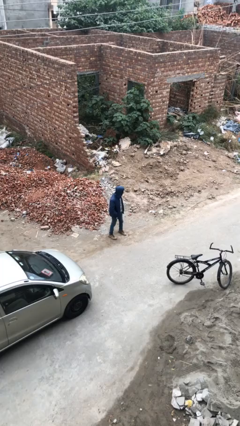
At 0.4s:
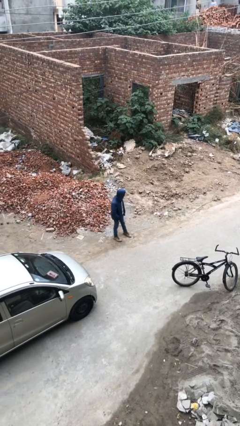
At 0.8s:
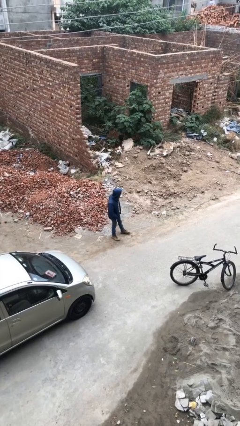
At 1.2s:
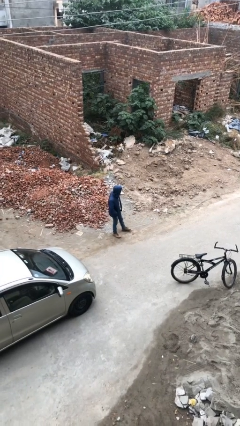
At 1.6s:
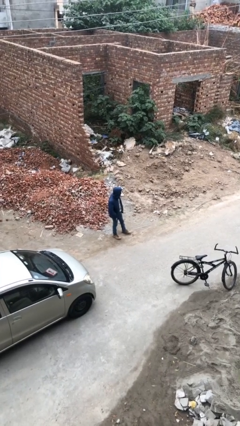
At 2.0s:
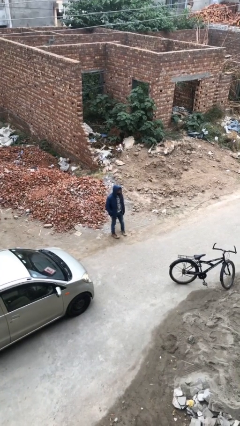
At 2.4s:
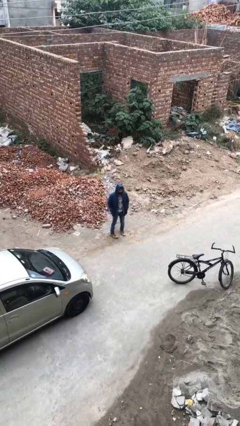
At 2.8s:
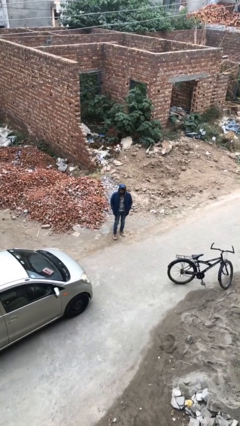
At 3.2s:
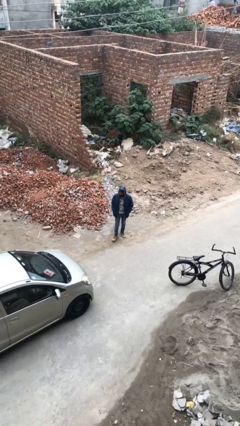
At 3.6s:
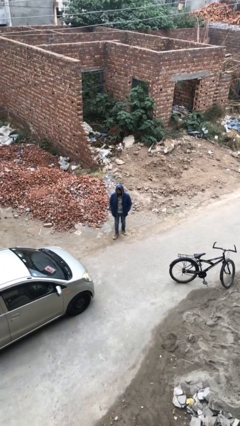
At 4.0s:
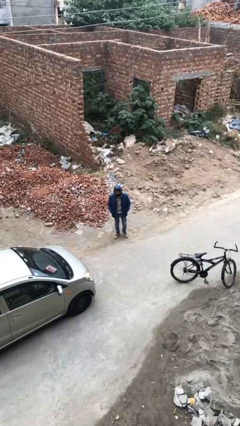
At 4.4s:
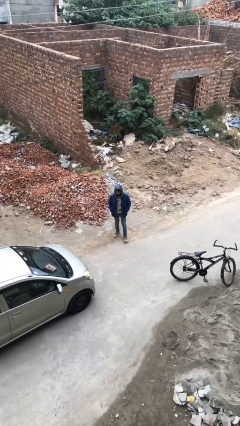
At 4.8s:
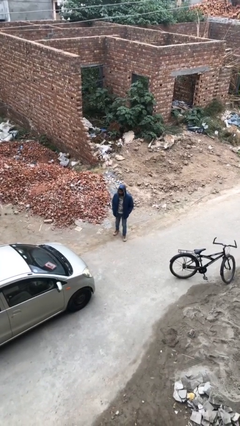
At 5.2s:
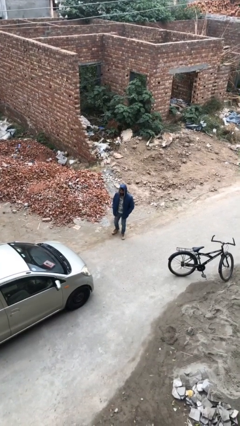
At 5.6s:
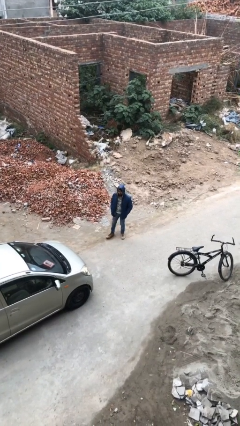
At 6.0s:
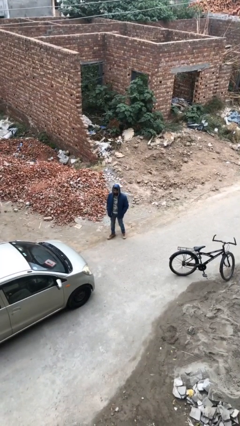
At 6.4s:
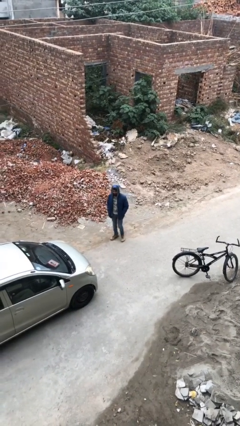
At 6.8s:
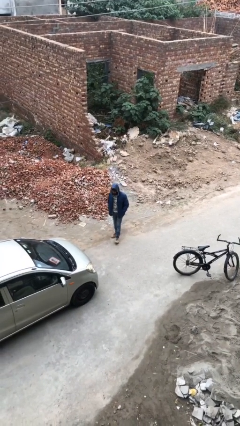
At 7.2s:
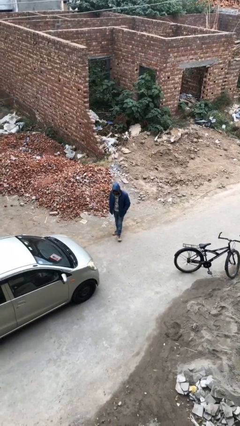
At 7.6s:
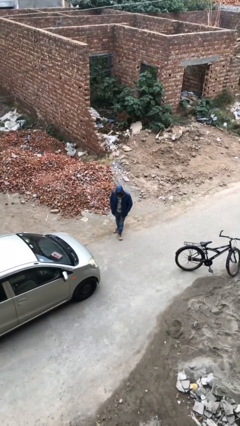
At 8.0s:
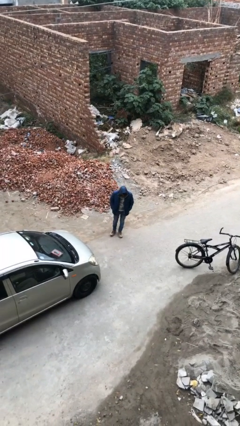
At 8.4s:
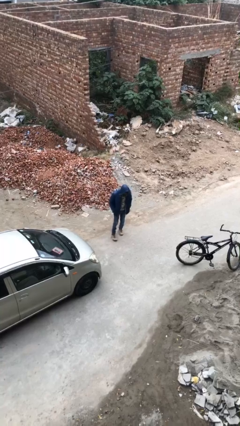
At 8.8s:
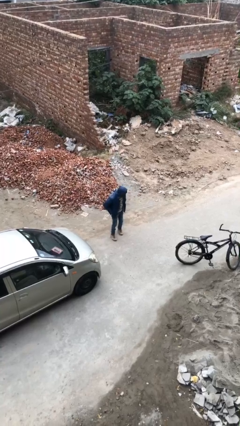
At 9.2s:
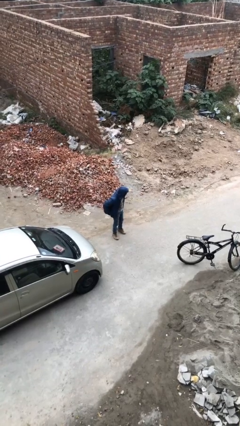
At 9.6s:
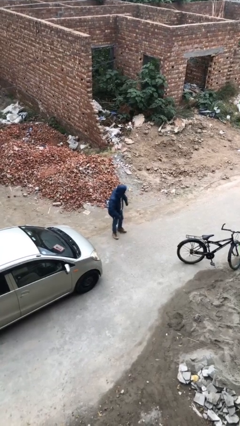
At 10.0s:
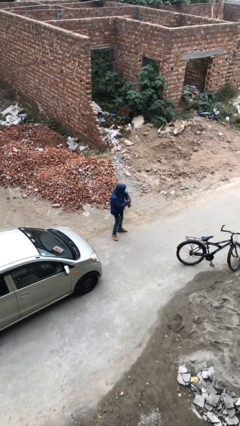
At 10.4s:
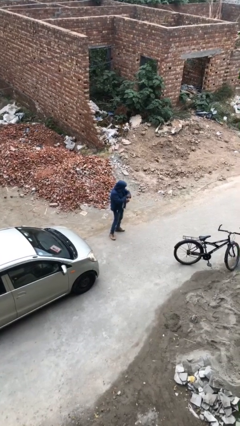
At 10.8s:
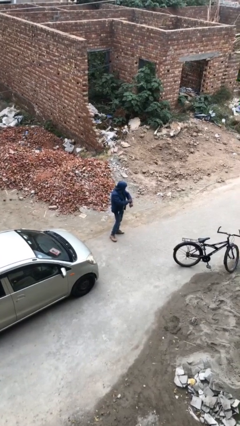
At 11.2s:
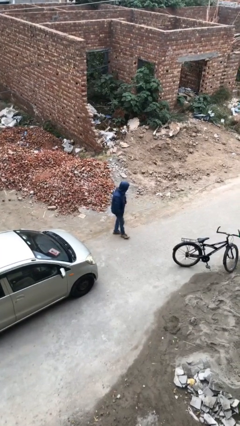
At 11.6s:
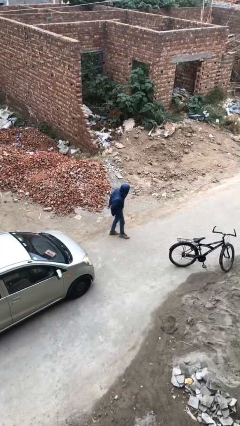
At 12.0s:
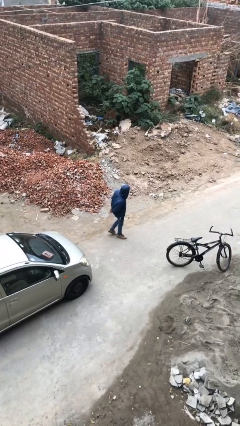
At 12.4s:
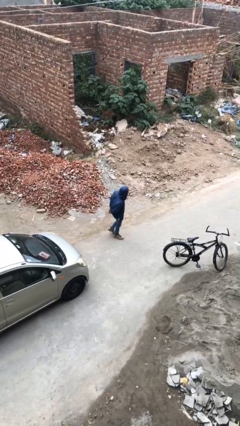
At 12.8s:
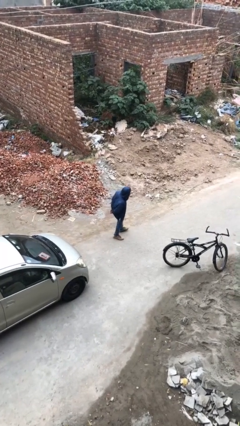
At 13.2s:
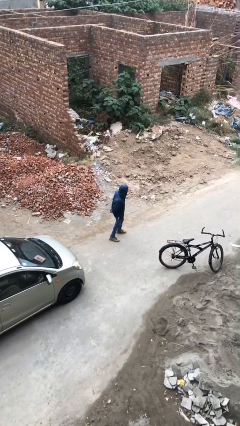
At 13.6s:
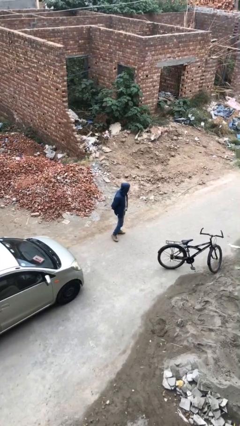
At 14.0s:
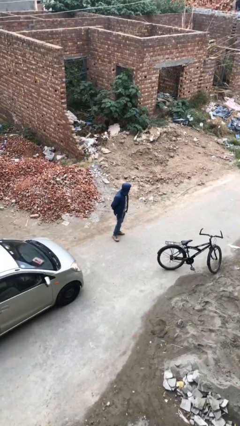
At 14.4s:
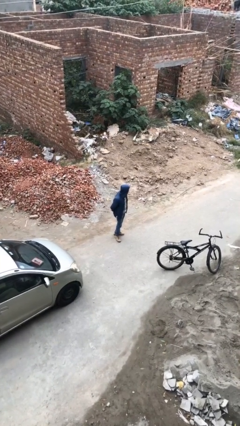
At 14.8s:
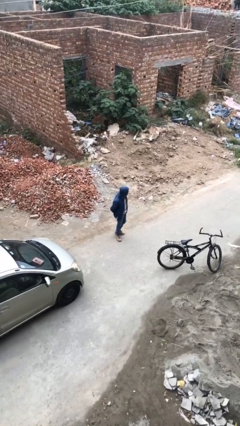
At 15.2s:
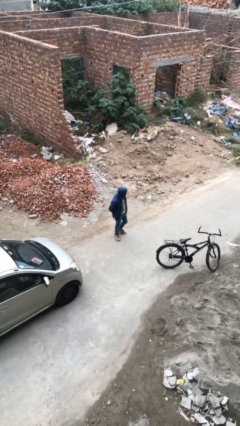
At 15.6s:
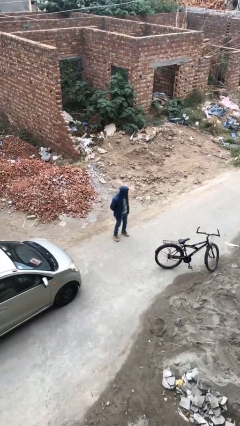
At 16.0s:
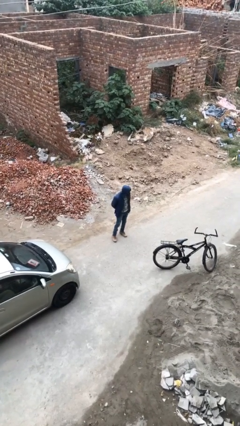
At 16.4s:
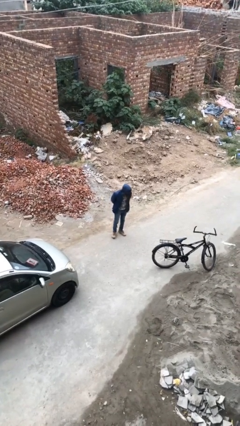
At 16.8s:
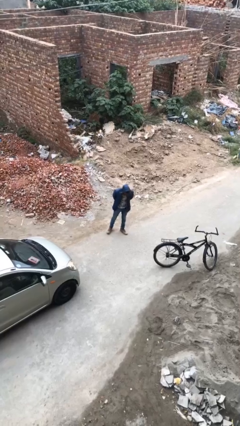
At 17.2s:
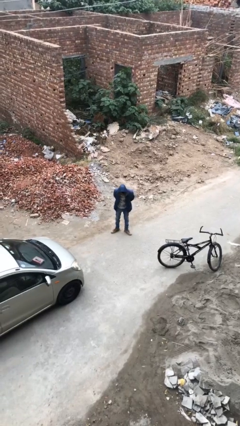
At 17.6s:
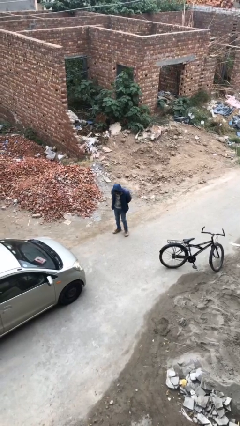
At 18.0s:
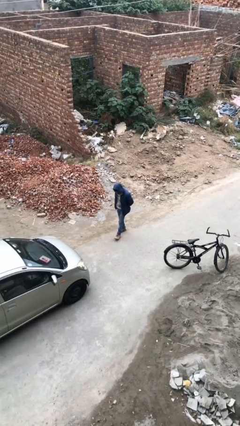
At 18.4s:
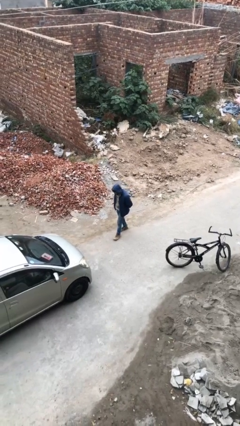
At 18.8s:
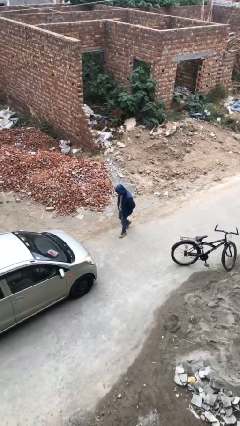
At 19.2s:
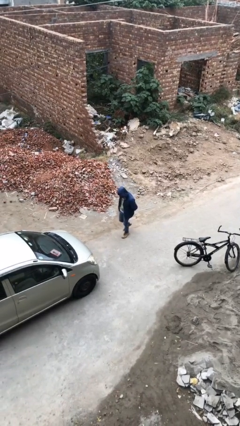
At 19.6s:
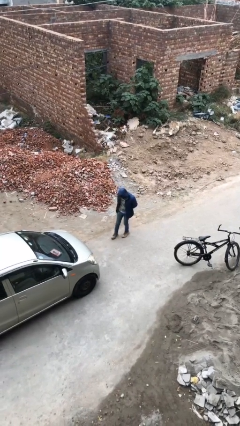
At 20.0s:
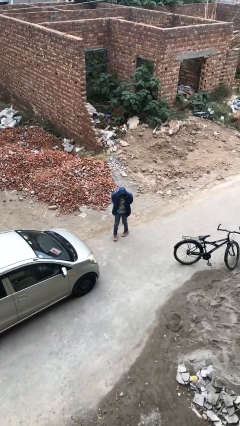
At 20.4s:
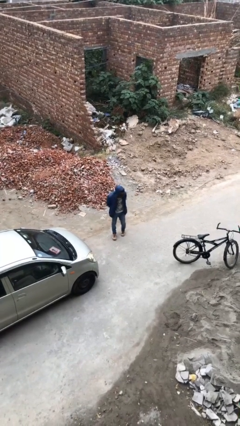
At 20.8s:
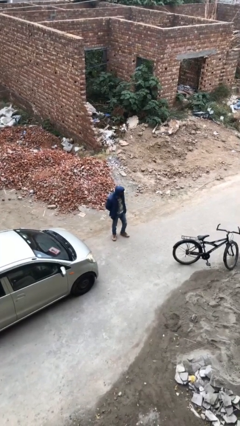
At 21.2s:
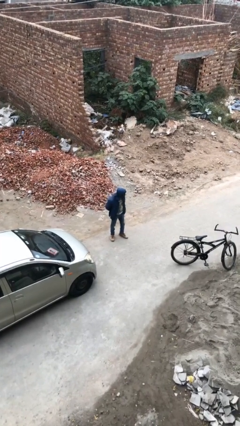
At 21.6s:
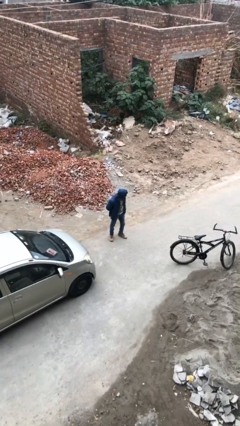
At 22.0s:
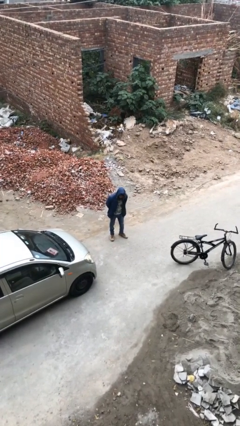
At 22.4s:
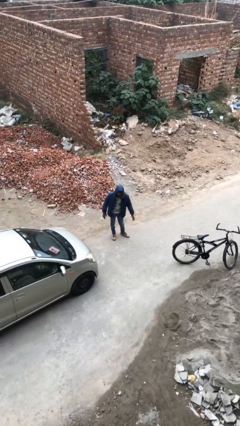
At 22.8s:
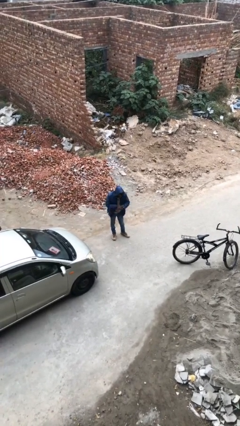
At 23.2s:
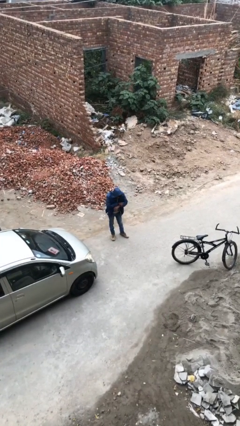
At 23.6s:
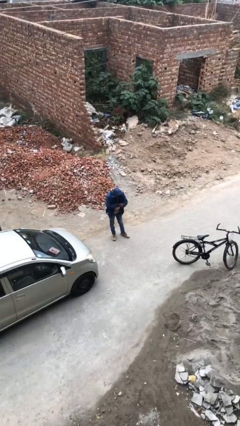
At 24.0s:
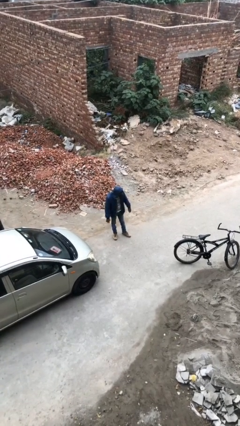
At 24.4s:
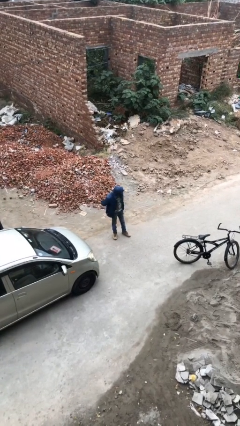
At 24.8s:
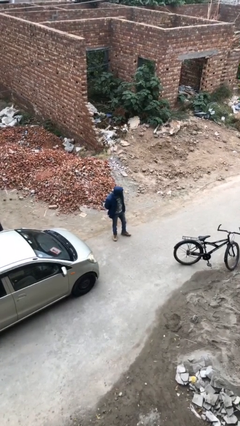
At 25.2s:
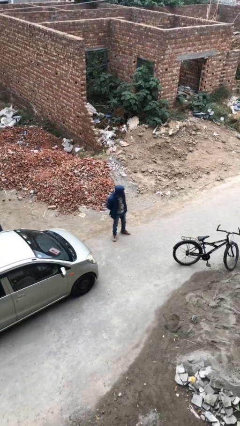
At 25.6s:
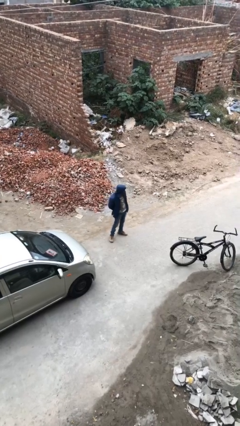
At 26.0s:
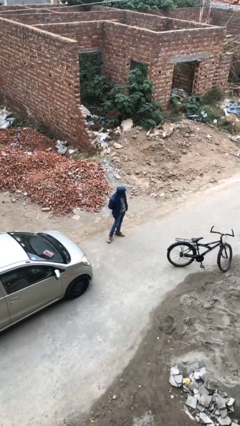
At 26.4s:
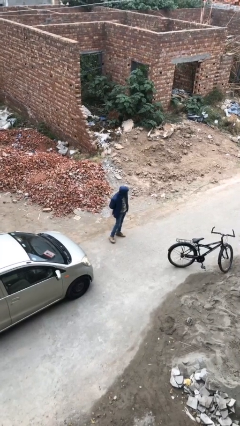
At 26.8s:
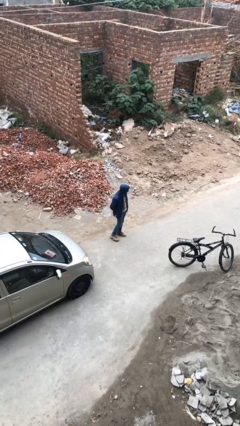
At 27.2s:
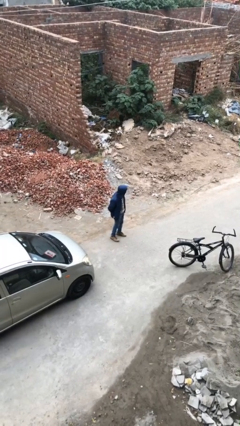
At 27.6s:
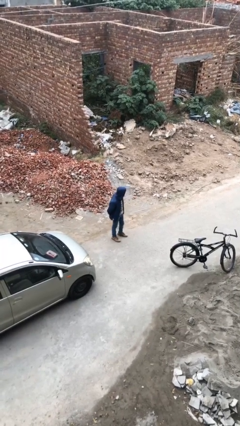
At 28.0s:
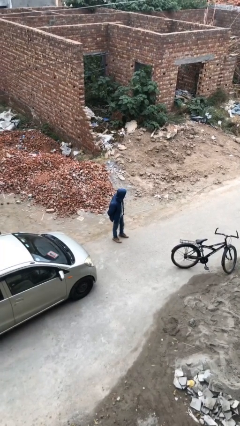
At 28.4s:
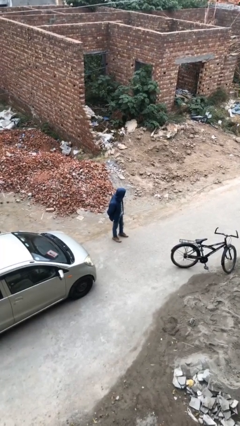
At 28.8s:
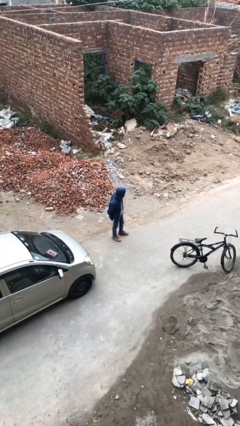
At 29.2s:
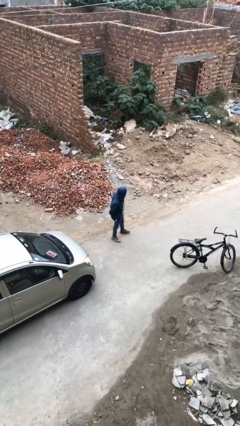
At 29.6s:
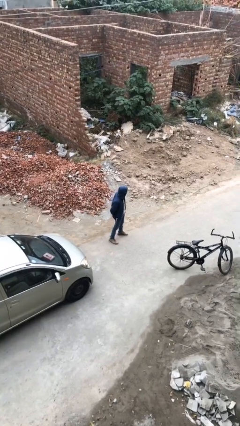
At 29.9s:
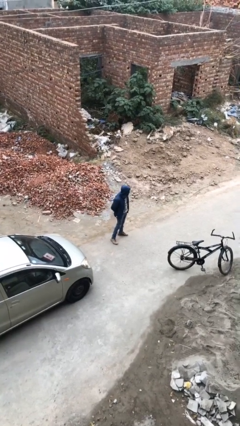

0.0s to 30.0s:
person walks

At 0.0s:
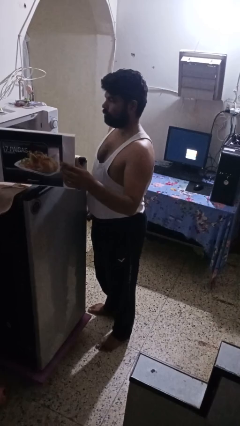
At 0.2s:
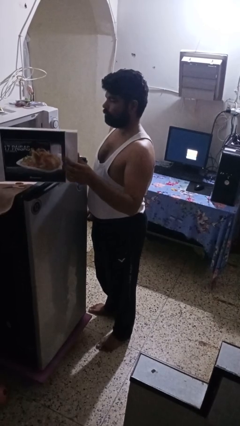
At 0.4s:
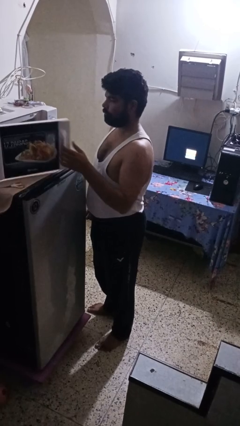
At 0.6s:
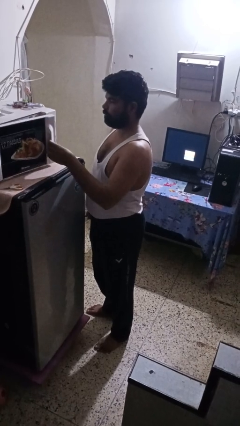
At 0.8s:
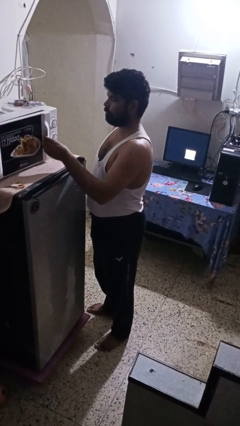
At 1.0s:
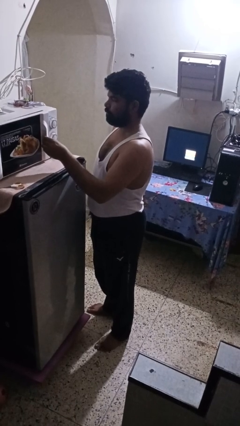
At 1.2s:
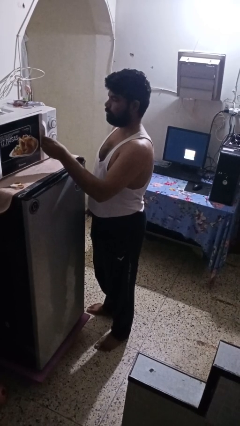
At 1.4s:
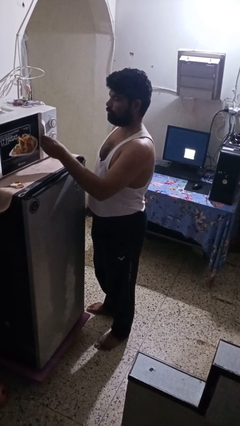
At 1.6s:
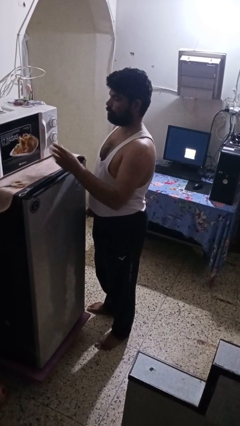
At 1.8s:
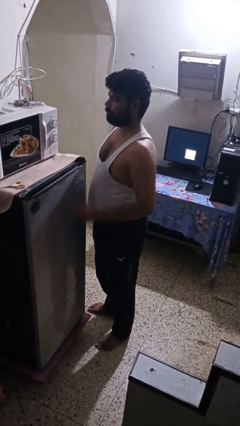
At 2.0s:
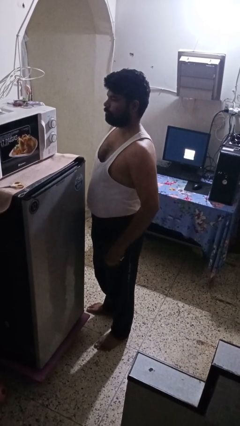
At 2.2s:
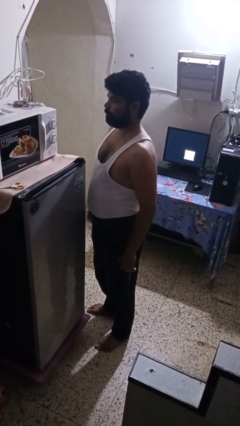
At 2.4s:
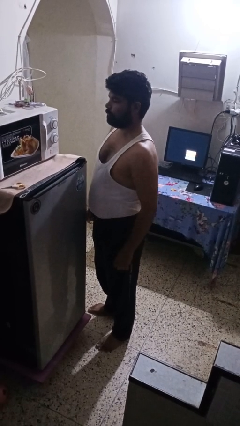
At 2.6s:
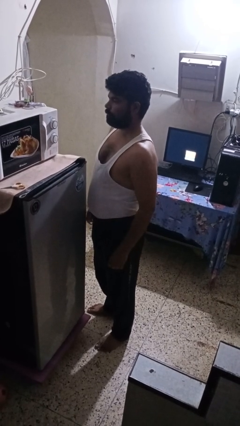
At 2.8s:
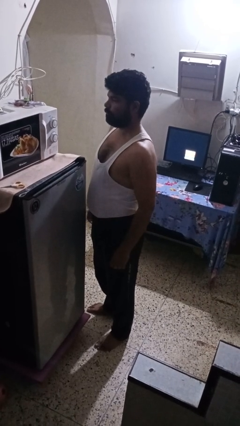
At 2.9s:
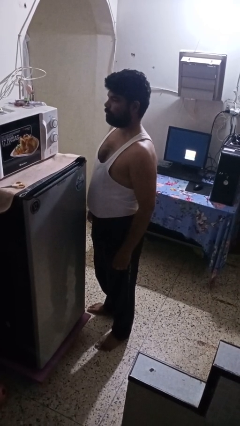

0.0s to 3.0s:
person closes microwave
